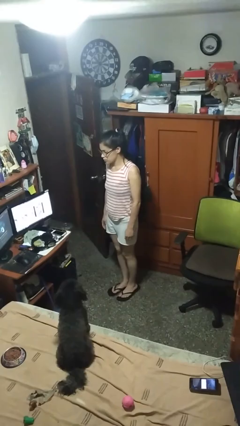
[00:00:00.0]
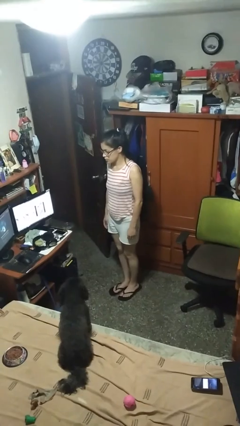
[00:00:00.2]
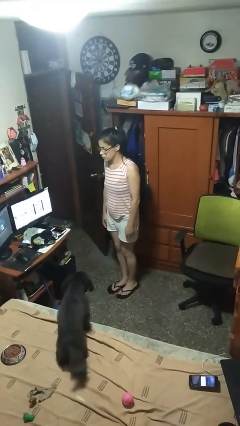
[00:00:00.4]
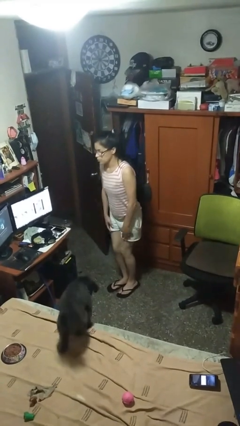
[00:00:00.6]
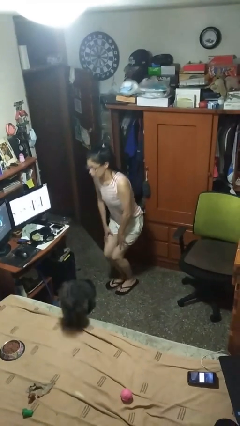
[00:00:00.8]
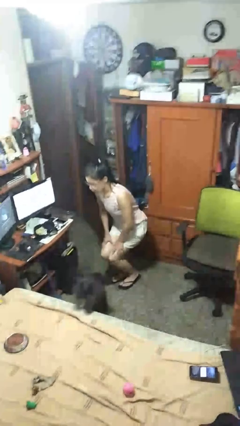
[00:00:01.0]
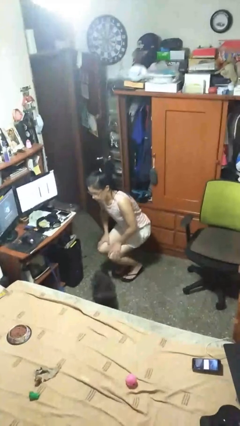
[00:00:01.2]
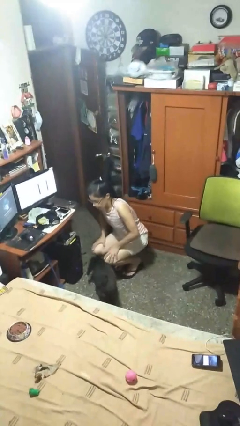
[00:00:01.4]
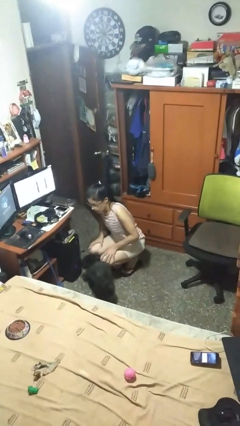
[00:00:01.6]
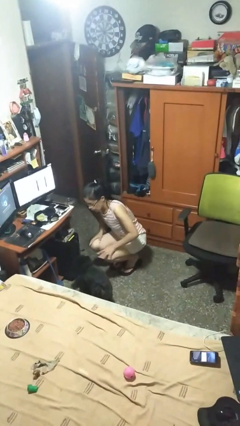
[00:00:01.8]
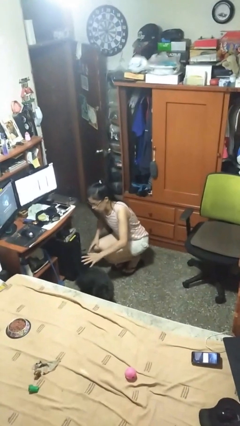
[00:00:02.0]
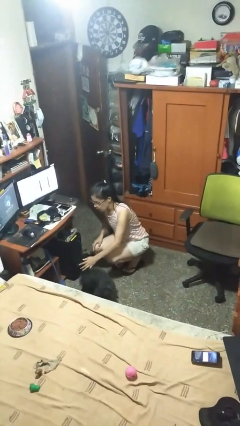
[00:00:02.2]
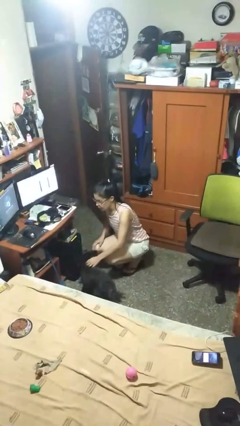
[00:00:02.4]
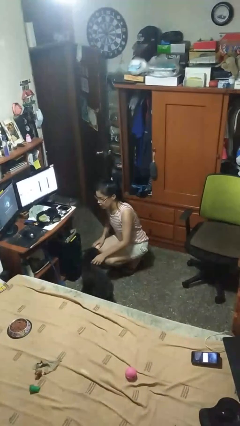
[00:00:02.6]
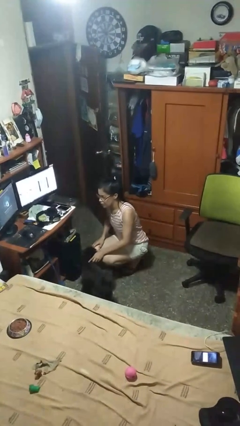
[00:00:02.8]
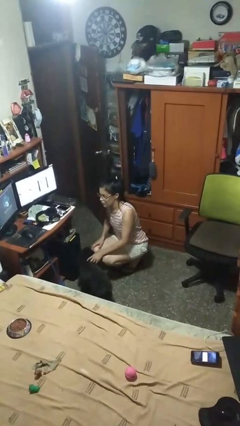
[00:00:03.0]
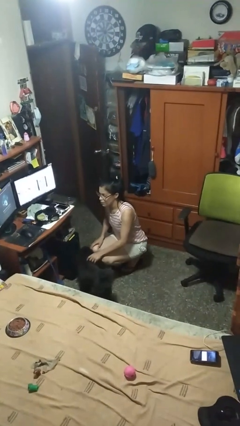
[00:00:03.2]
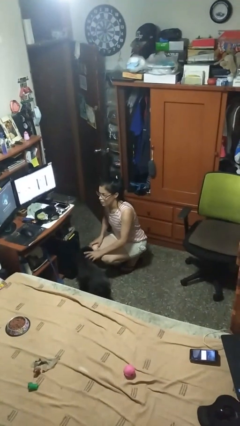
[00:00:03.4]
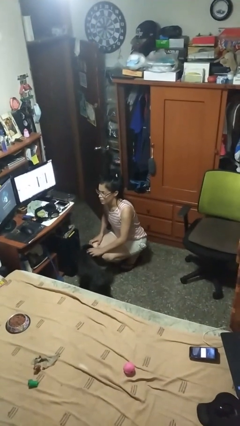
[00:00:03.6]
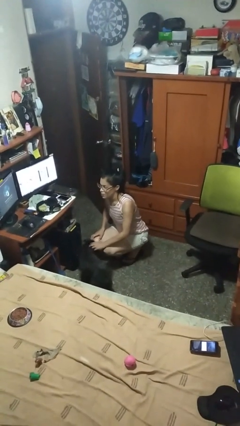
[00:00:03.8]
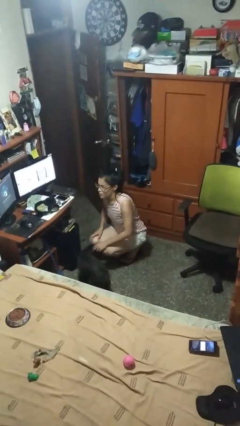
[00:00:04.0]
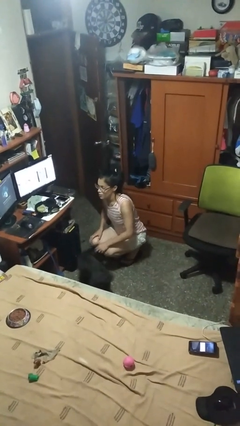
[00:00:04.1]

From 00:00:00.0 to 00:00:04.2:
person squats

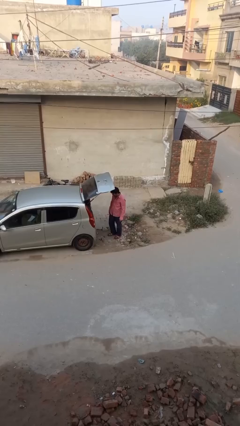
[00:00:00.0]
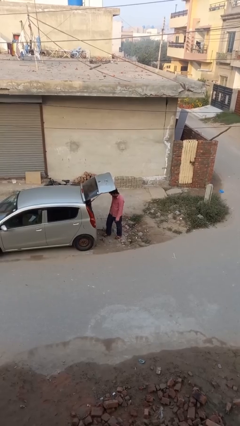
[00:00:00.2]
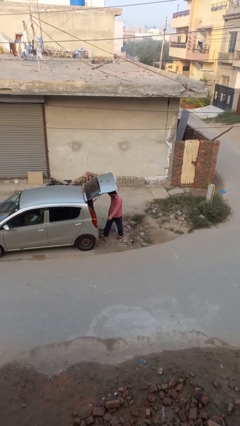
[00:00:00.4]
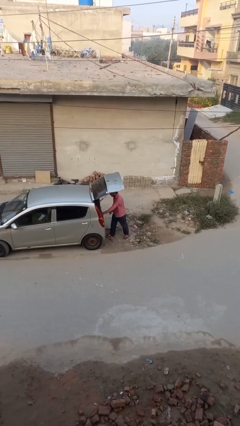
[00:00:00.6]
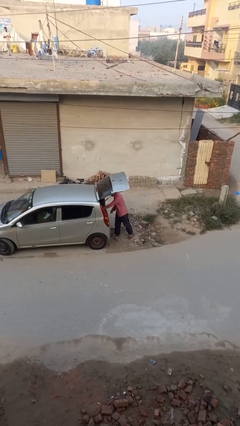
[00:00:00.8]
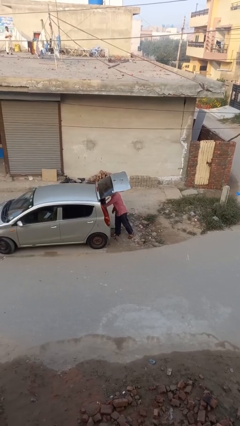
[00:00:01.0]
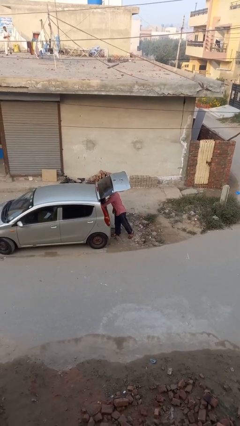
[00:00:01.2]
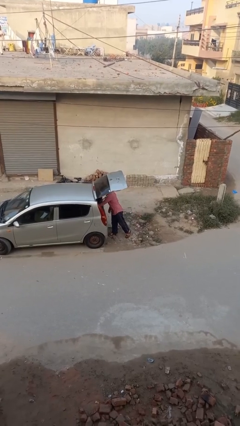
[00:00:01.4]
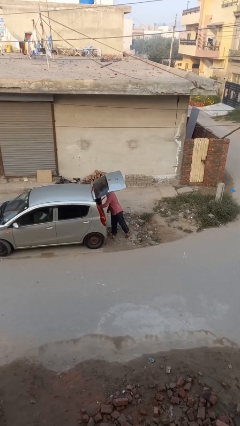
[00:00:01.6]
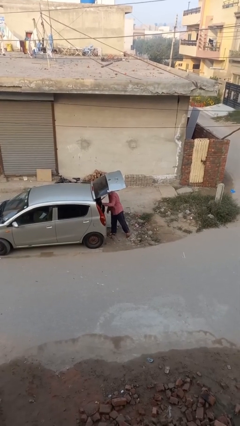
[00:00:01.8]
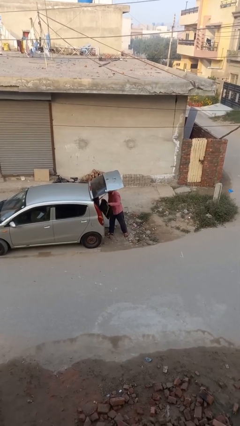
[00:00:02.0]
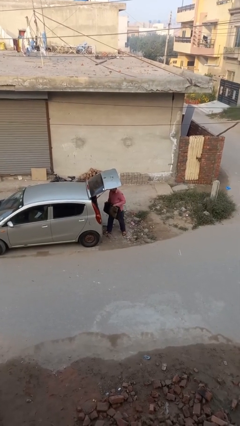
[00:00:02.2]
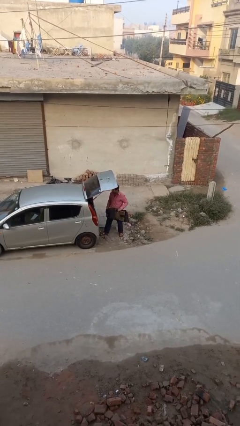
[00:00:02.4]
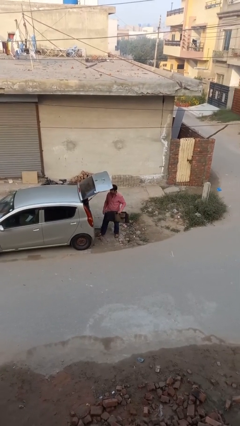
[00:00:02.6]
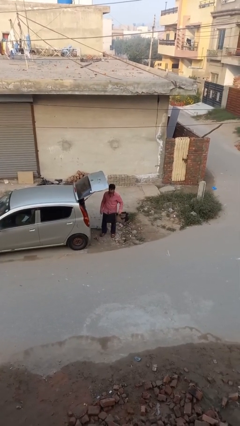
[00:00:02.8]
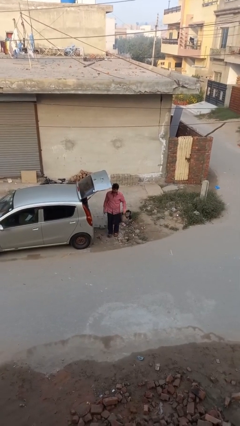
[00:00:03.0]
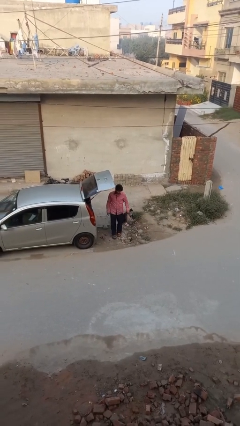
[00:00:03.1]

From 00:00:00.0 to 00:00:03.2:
person unloads car

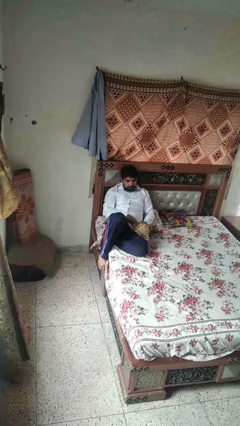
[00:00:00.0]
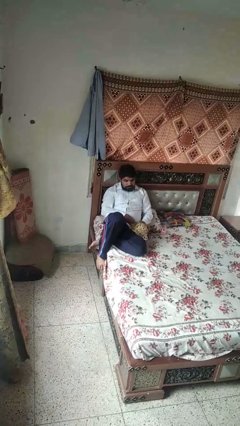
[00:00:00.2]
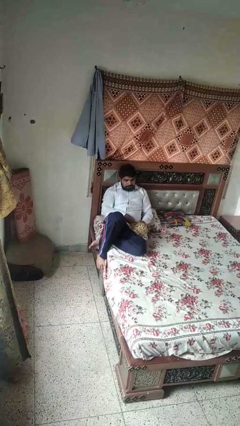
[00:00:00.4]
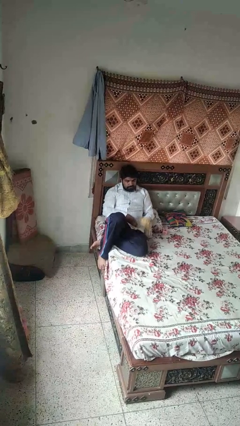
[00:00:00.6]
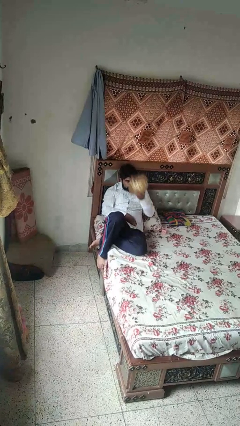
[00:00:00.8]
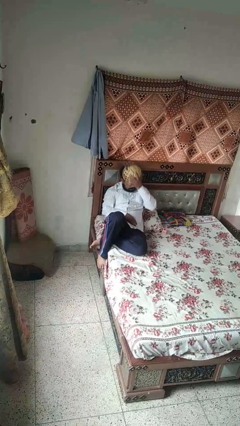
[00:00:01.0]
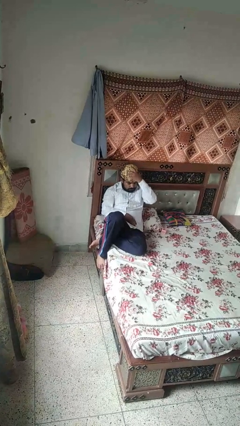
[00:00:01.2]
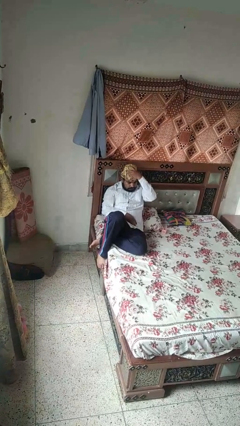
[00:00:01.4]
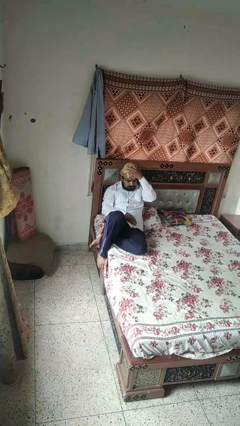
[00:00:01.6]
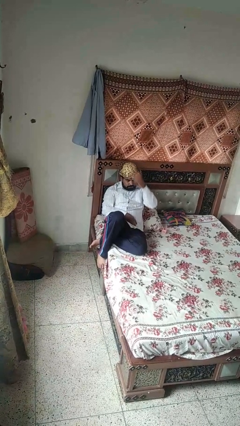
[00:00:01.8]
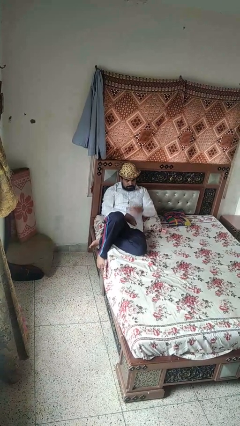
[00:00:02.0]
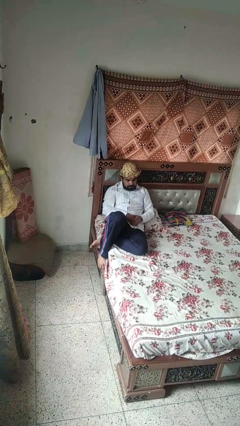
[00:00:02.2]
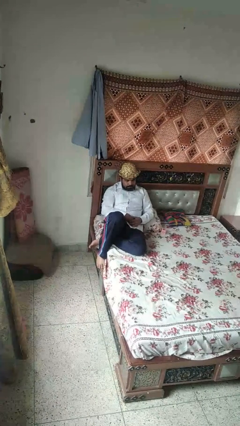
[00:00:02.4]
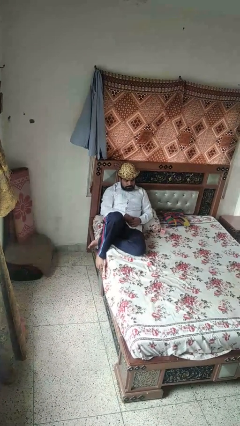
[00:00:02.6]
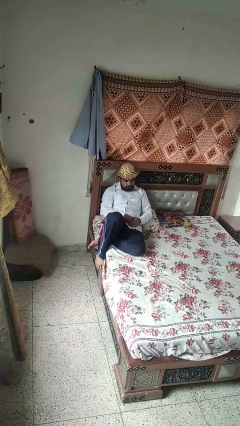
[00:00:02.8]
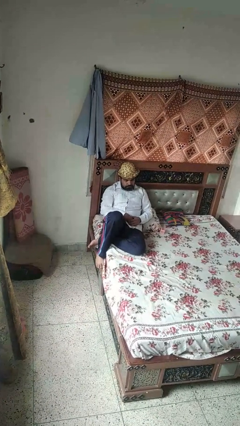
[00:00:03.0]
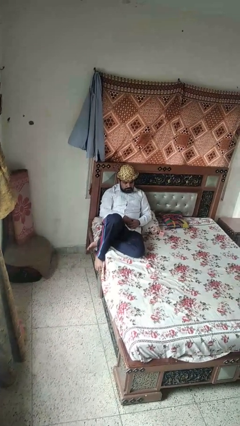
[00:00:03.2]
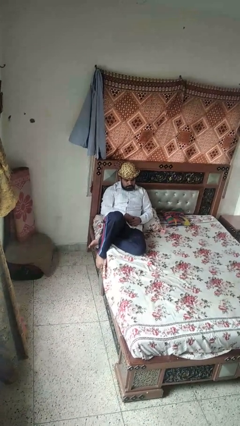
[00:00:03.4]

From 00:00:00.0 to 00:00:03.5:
person puts on hat

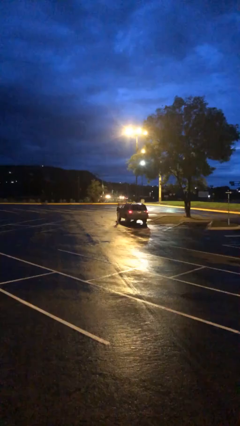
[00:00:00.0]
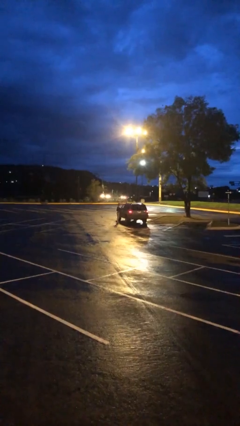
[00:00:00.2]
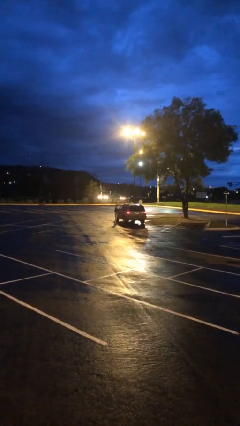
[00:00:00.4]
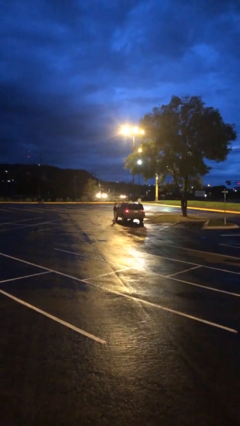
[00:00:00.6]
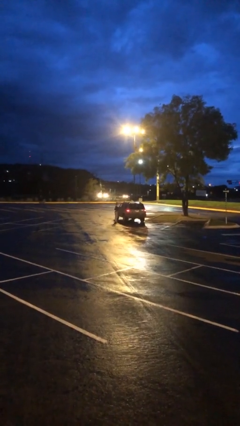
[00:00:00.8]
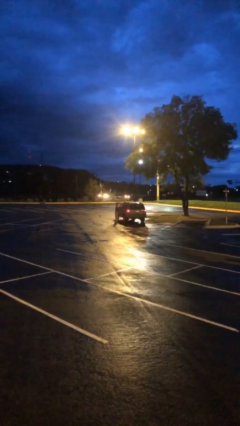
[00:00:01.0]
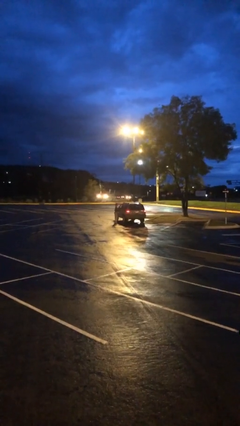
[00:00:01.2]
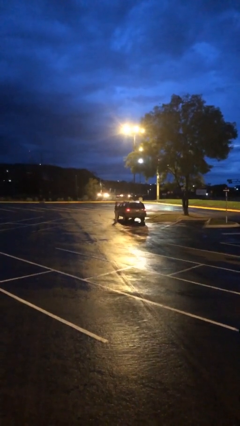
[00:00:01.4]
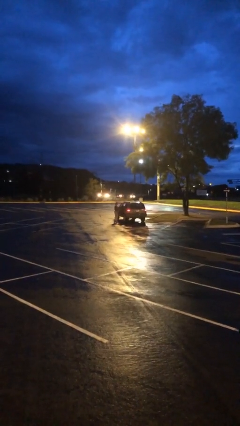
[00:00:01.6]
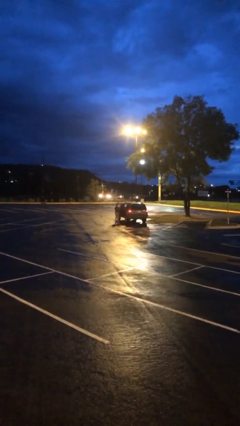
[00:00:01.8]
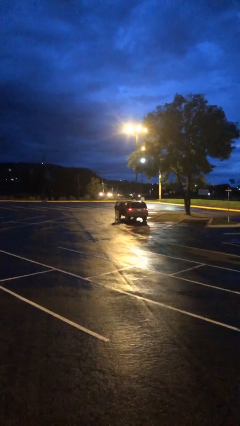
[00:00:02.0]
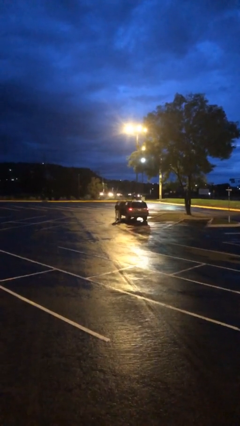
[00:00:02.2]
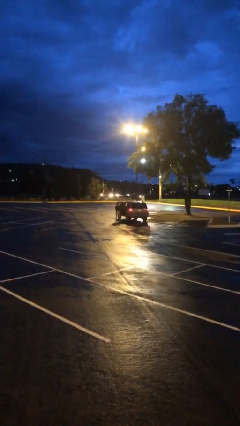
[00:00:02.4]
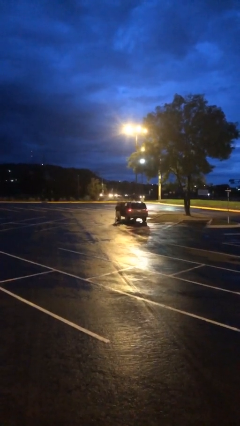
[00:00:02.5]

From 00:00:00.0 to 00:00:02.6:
person opens car door

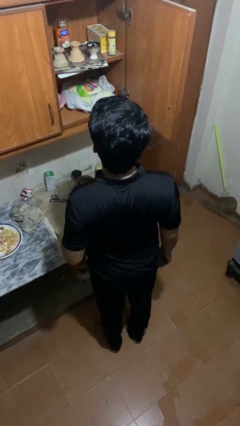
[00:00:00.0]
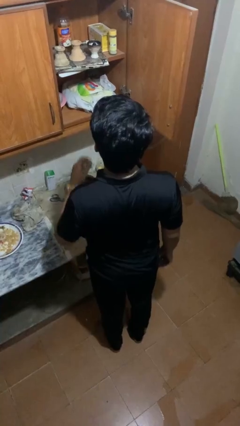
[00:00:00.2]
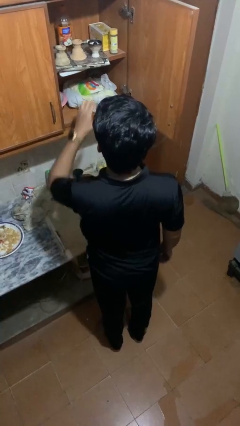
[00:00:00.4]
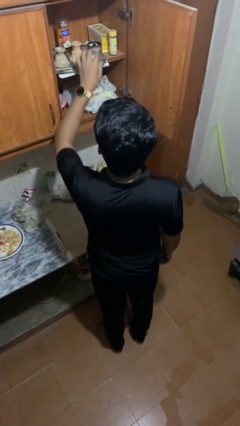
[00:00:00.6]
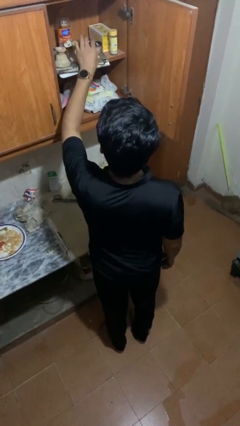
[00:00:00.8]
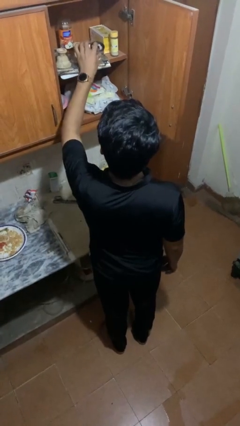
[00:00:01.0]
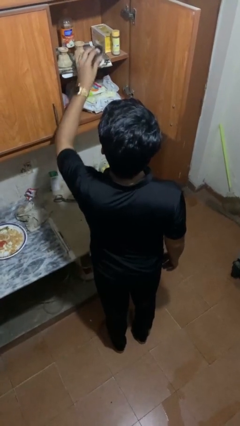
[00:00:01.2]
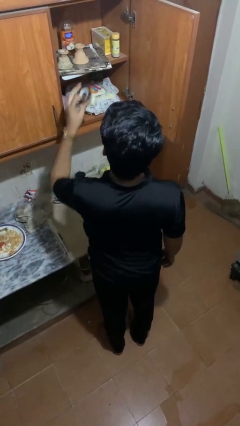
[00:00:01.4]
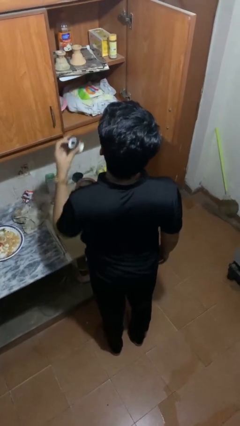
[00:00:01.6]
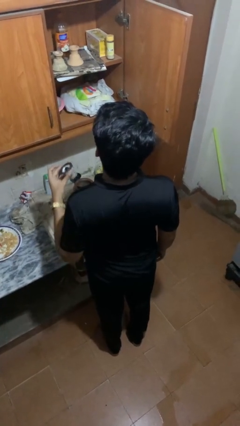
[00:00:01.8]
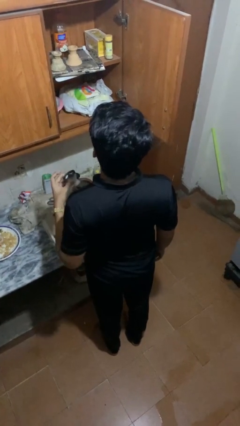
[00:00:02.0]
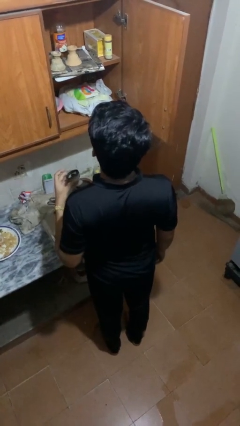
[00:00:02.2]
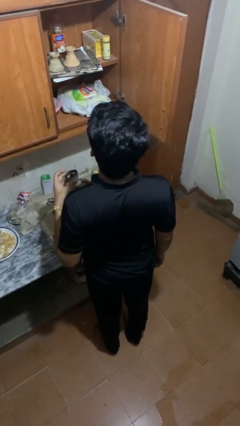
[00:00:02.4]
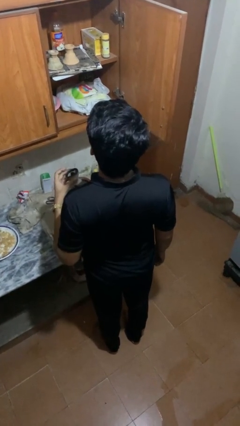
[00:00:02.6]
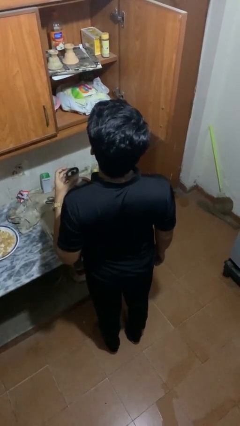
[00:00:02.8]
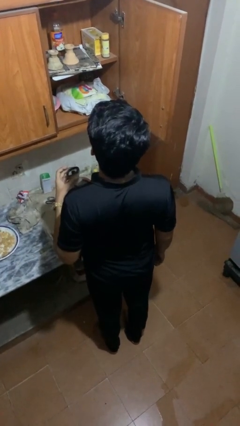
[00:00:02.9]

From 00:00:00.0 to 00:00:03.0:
person takes object from cabinet

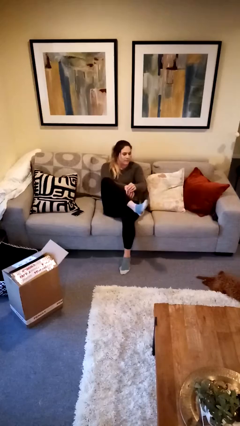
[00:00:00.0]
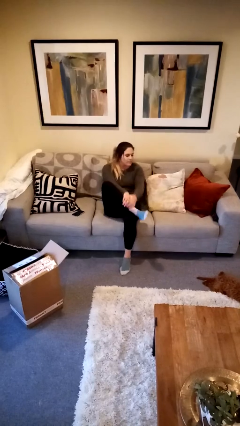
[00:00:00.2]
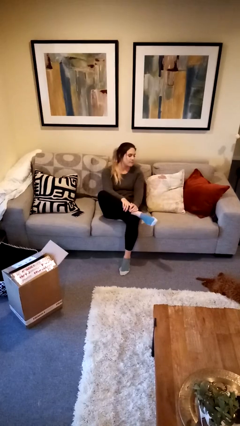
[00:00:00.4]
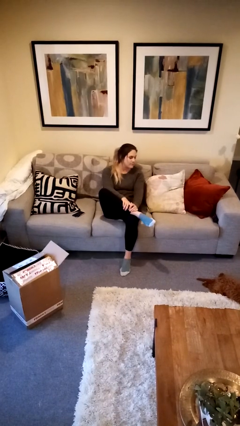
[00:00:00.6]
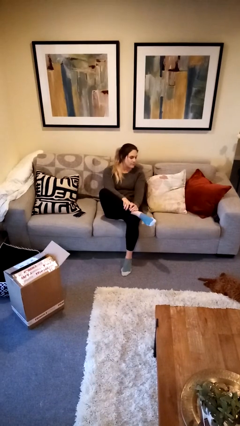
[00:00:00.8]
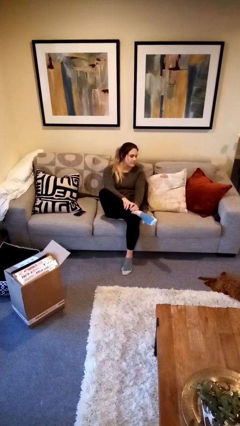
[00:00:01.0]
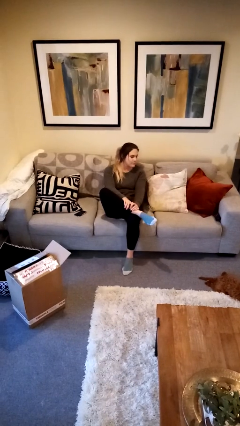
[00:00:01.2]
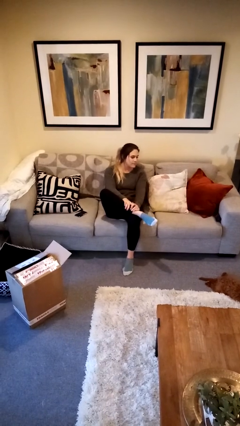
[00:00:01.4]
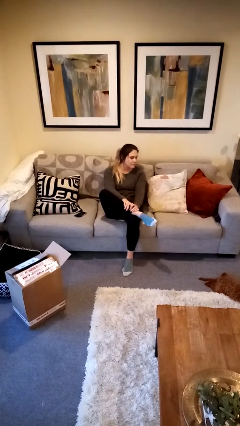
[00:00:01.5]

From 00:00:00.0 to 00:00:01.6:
person crosses legs
